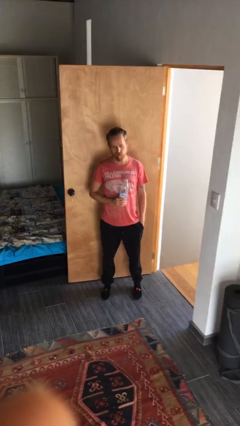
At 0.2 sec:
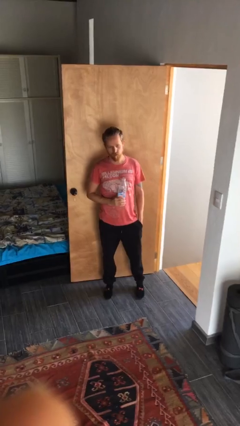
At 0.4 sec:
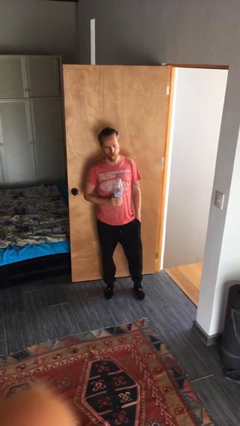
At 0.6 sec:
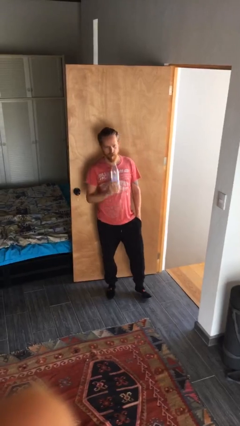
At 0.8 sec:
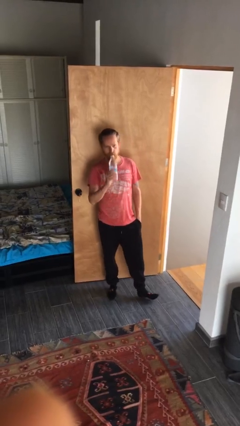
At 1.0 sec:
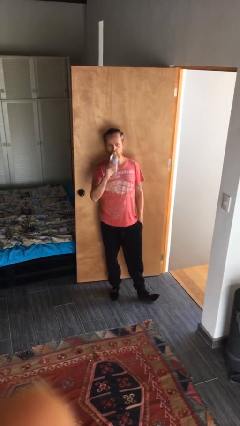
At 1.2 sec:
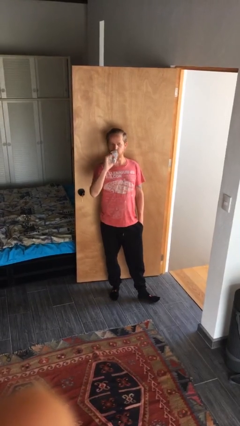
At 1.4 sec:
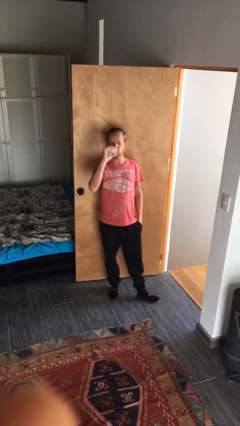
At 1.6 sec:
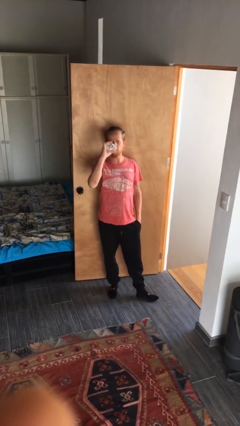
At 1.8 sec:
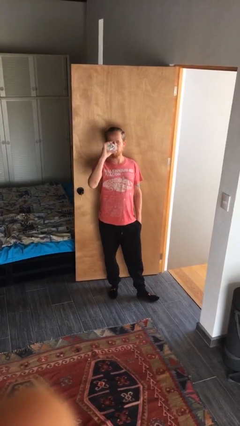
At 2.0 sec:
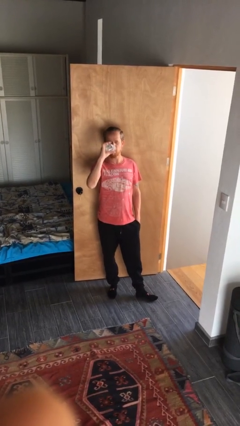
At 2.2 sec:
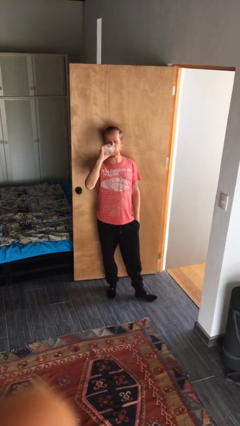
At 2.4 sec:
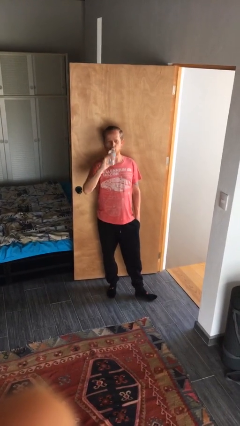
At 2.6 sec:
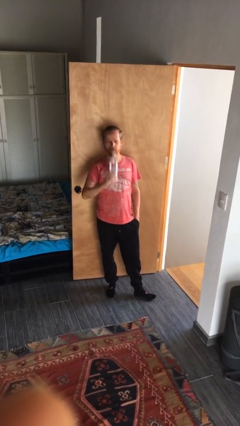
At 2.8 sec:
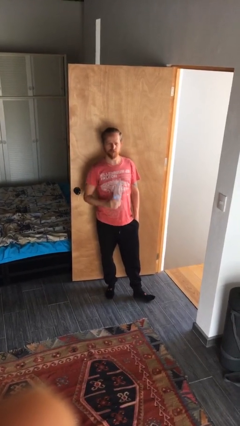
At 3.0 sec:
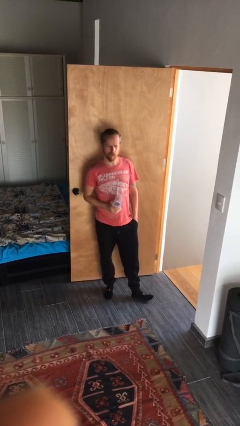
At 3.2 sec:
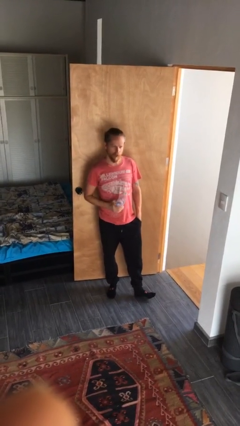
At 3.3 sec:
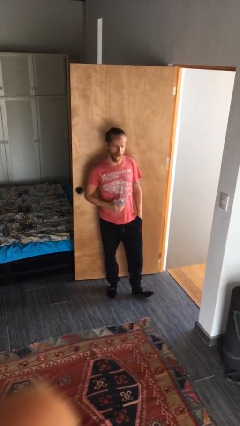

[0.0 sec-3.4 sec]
person drinks from bottle

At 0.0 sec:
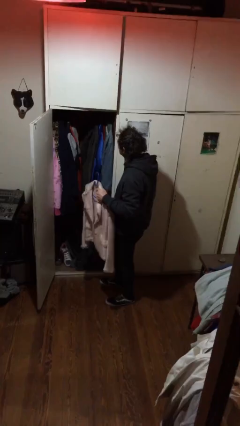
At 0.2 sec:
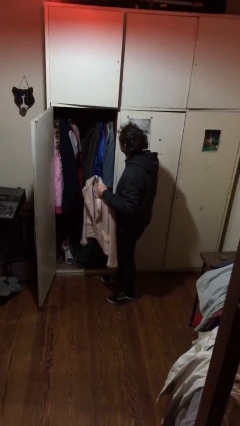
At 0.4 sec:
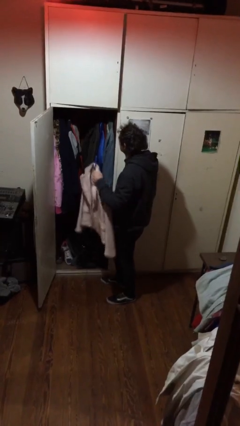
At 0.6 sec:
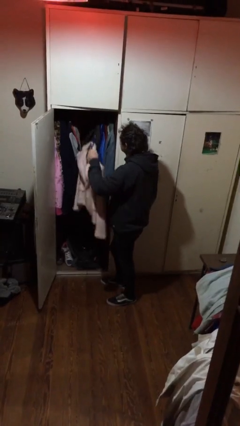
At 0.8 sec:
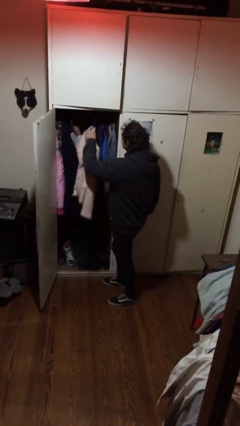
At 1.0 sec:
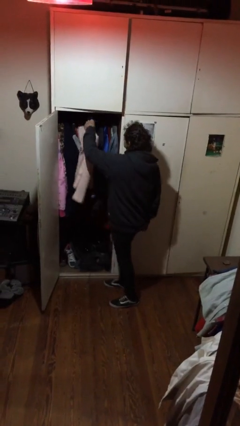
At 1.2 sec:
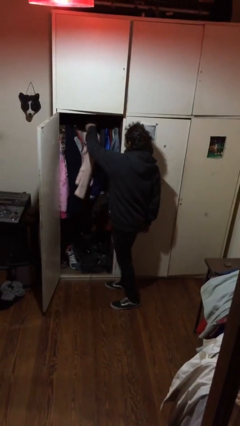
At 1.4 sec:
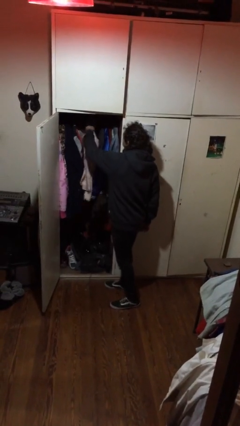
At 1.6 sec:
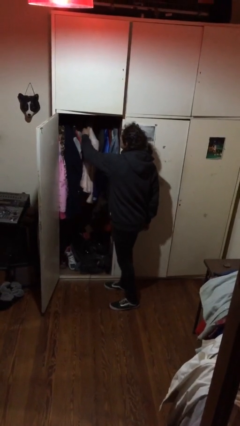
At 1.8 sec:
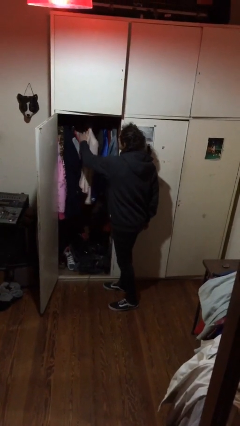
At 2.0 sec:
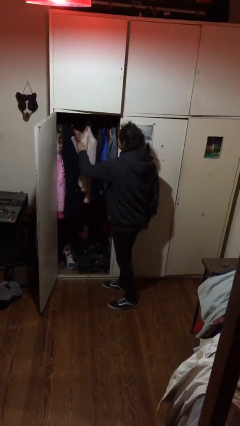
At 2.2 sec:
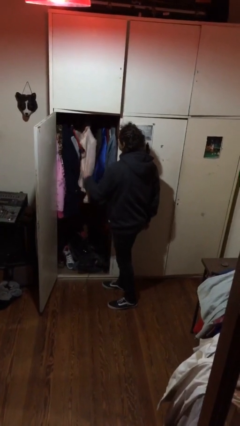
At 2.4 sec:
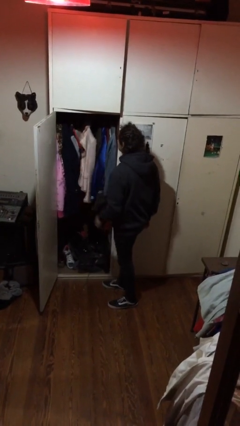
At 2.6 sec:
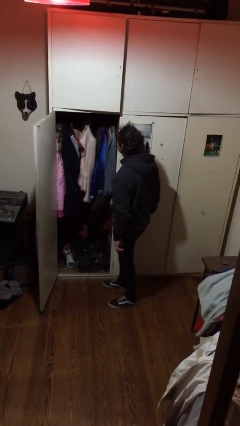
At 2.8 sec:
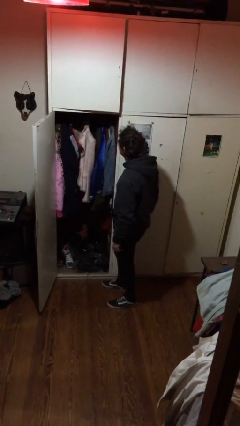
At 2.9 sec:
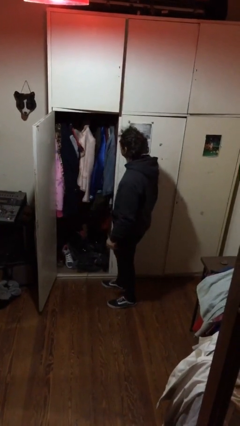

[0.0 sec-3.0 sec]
person puts clothes into closet

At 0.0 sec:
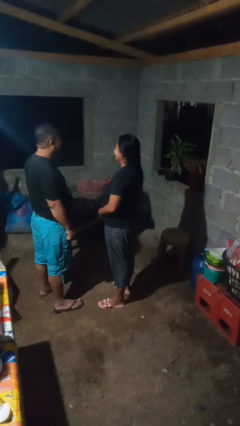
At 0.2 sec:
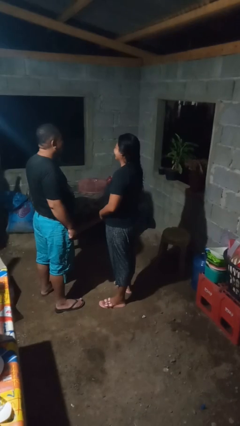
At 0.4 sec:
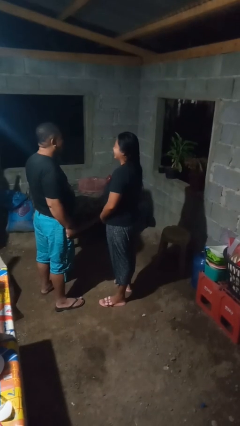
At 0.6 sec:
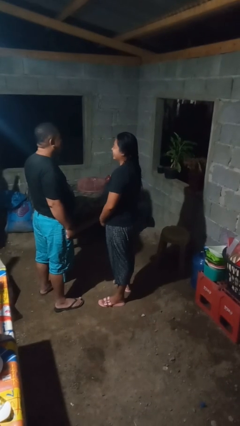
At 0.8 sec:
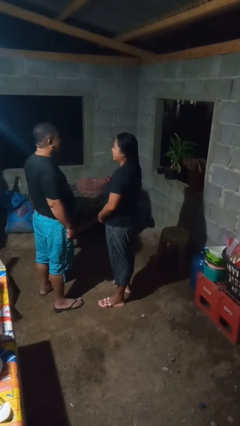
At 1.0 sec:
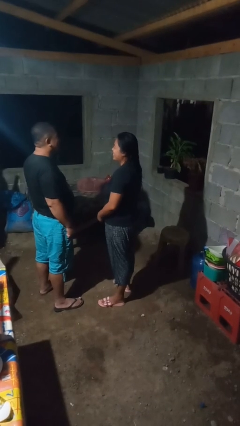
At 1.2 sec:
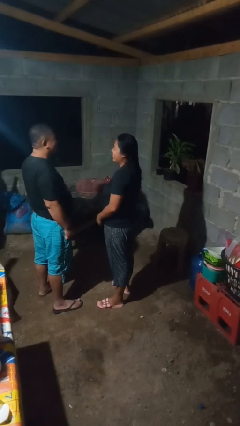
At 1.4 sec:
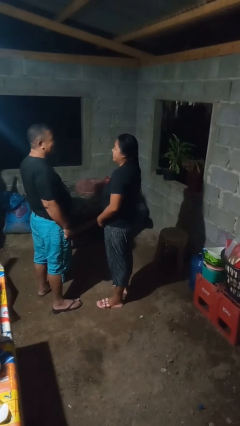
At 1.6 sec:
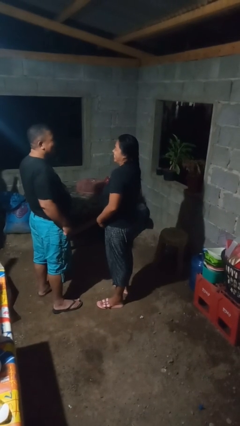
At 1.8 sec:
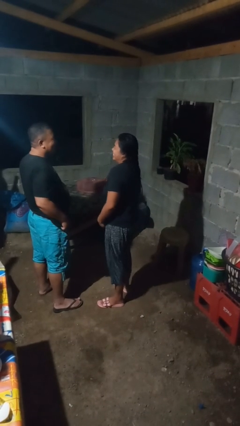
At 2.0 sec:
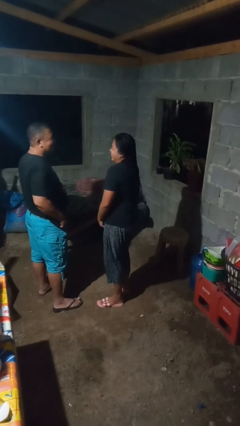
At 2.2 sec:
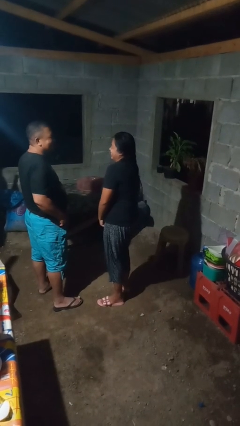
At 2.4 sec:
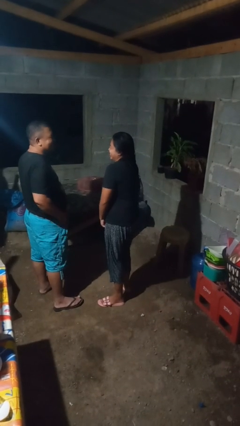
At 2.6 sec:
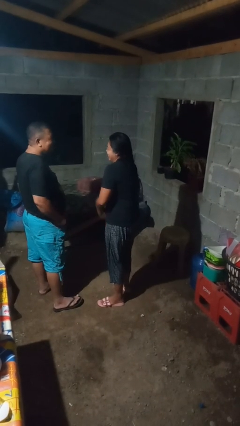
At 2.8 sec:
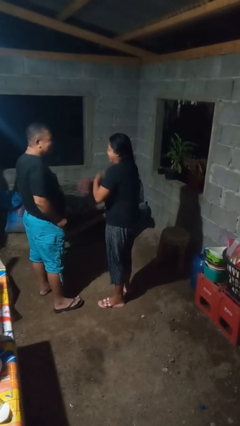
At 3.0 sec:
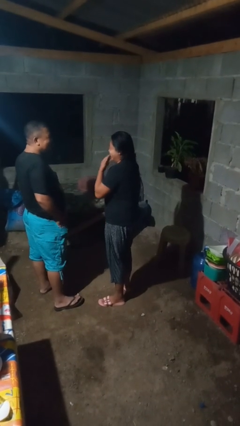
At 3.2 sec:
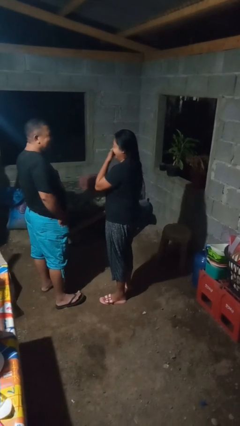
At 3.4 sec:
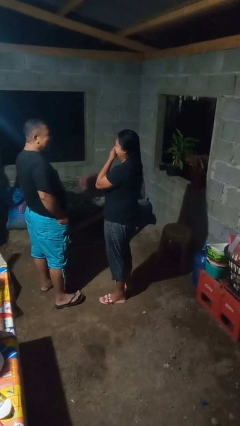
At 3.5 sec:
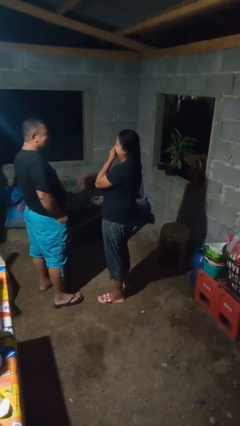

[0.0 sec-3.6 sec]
person laughs with person

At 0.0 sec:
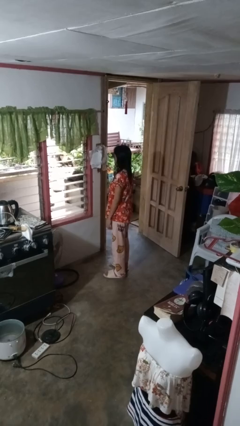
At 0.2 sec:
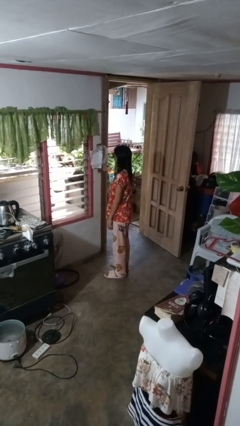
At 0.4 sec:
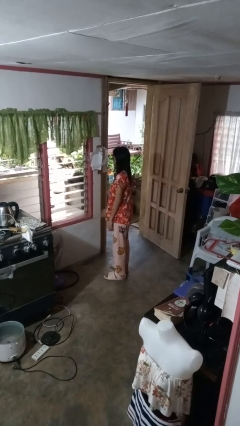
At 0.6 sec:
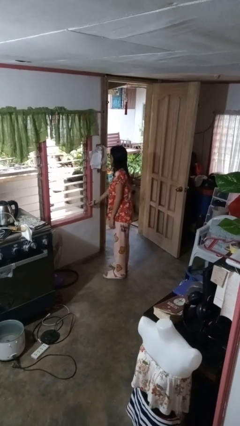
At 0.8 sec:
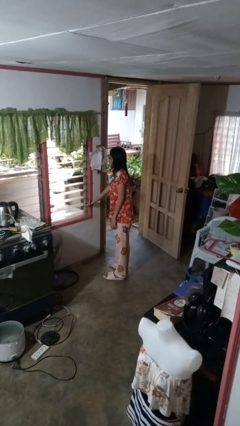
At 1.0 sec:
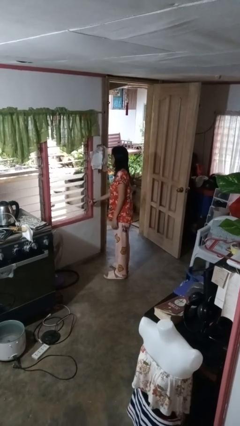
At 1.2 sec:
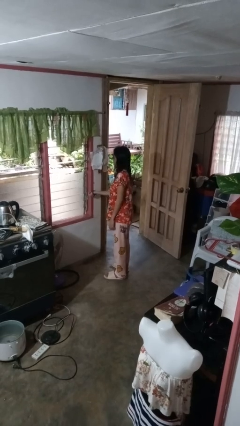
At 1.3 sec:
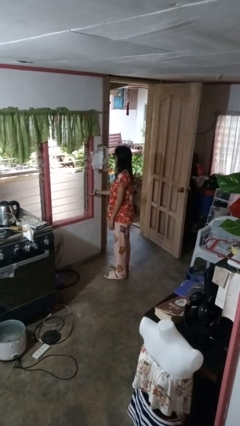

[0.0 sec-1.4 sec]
person closes home window

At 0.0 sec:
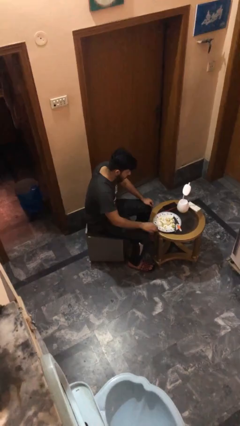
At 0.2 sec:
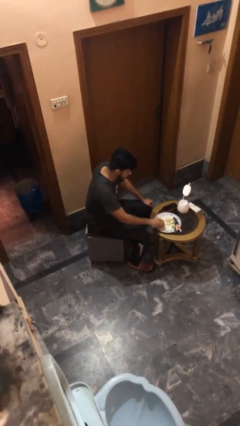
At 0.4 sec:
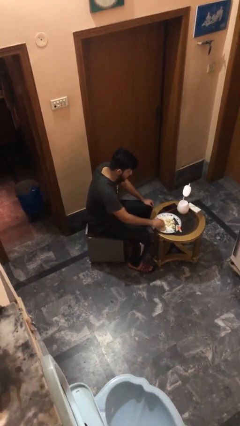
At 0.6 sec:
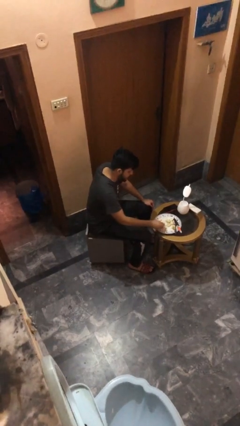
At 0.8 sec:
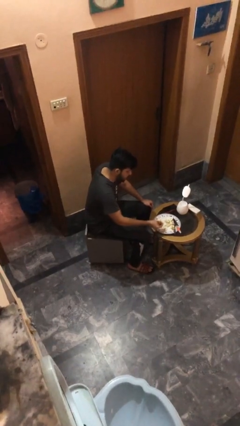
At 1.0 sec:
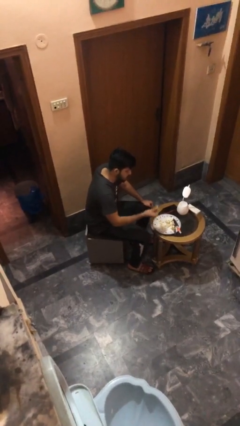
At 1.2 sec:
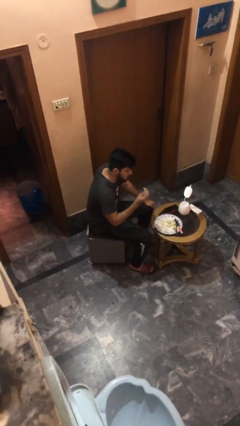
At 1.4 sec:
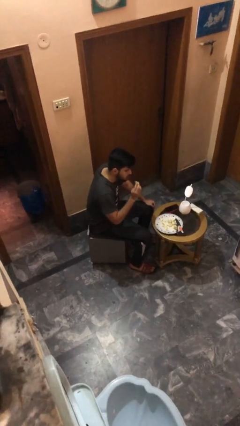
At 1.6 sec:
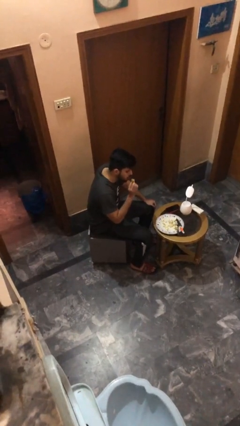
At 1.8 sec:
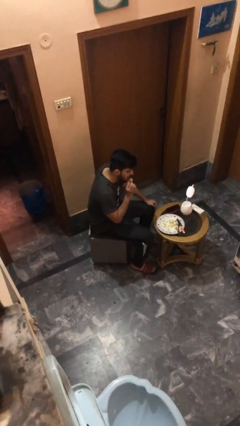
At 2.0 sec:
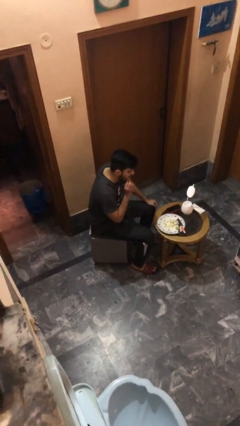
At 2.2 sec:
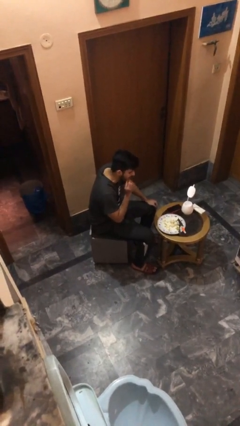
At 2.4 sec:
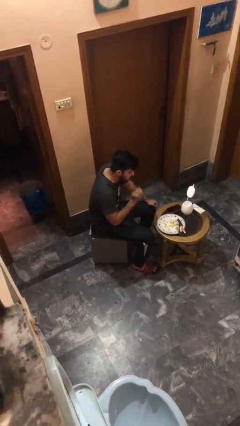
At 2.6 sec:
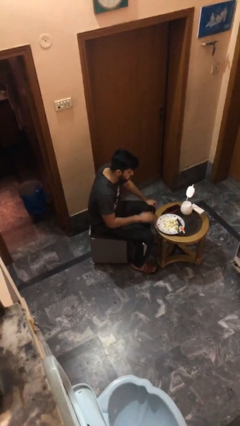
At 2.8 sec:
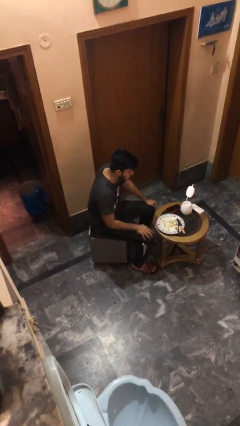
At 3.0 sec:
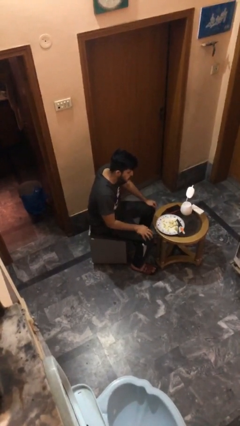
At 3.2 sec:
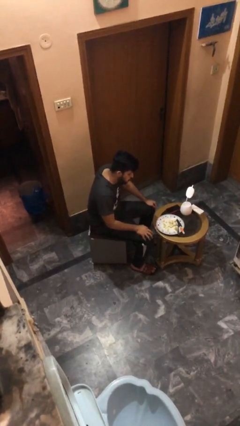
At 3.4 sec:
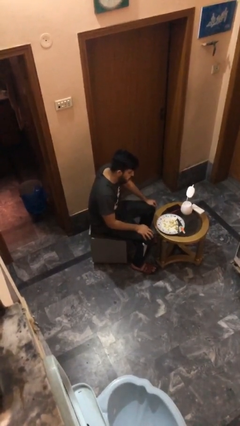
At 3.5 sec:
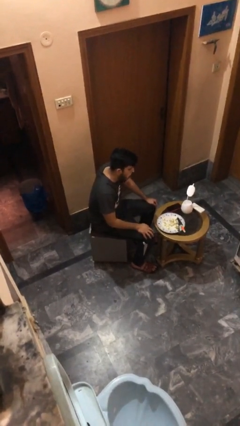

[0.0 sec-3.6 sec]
person eats with hands

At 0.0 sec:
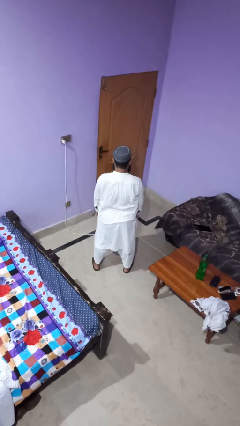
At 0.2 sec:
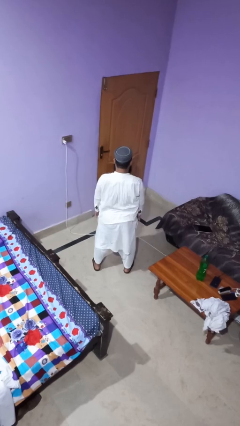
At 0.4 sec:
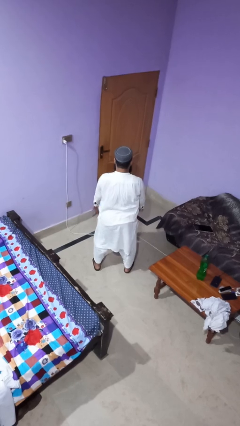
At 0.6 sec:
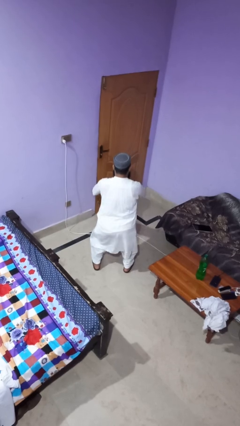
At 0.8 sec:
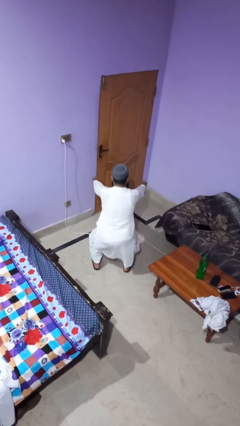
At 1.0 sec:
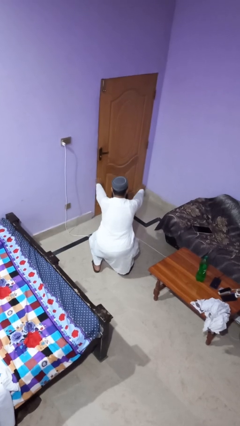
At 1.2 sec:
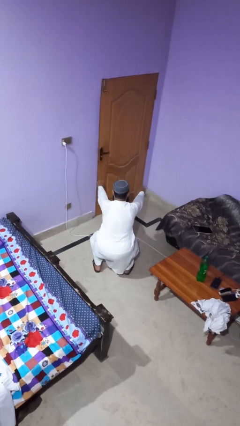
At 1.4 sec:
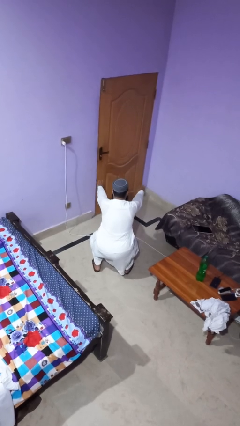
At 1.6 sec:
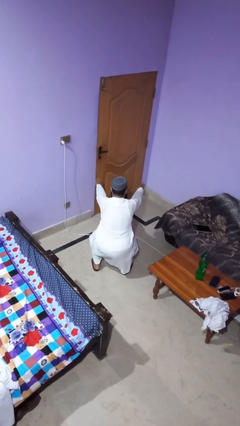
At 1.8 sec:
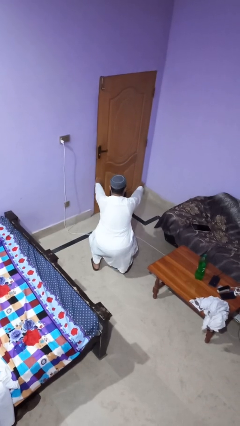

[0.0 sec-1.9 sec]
person squats

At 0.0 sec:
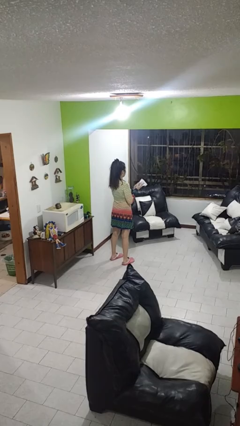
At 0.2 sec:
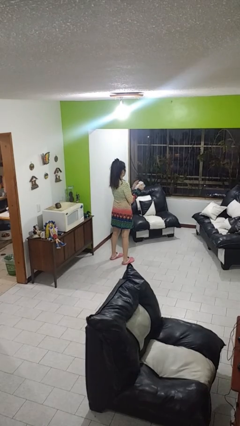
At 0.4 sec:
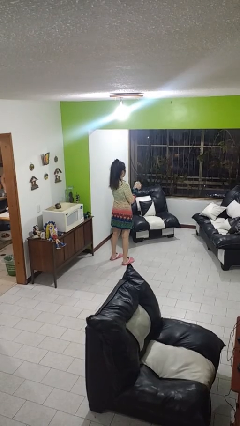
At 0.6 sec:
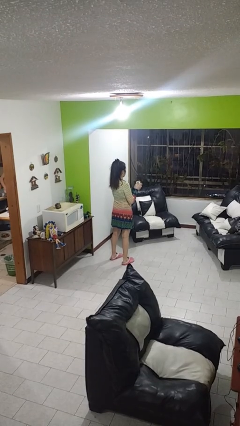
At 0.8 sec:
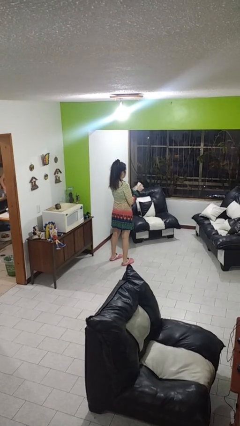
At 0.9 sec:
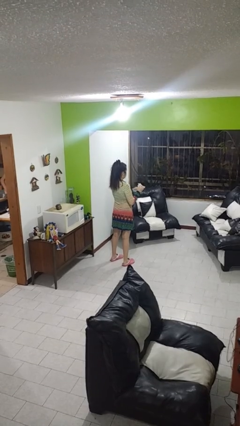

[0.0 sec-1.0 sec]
person crumples paper
